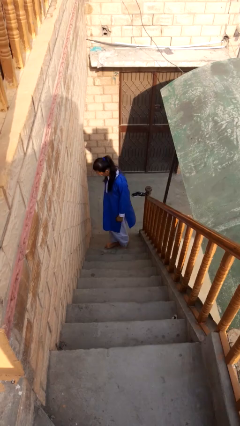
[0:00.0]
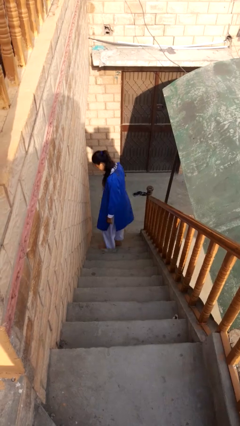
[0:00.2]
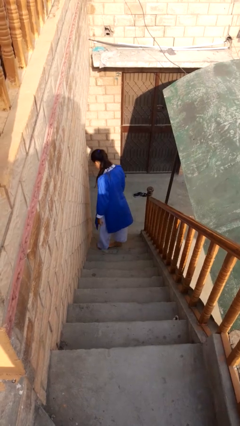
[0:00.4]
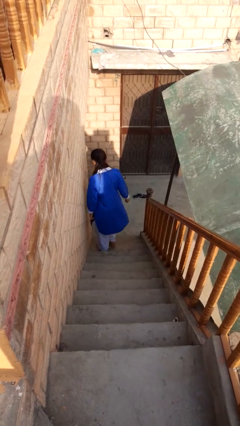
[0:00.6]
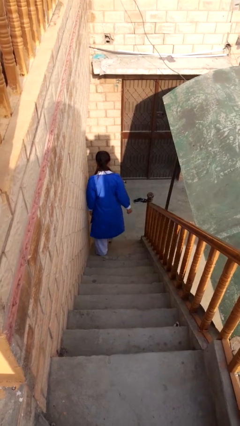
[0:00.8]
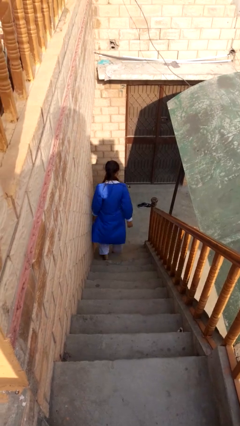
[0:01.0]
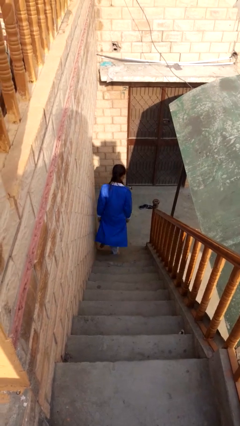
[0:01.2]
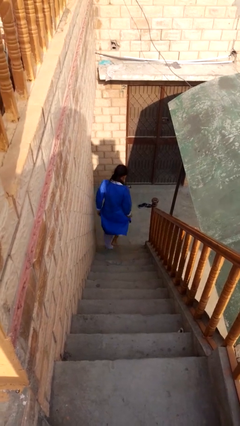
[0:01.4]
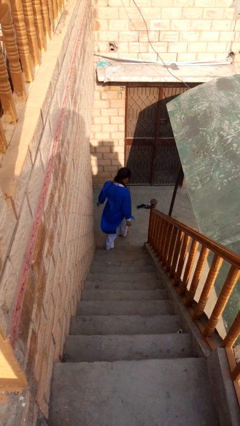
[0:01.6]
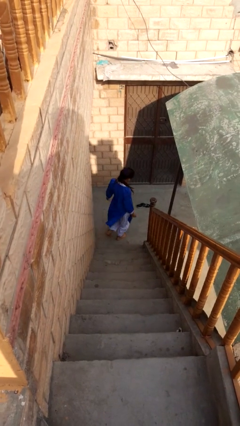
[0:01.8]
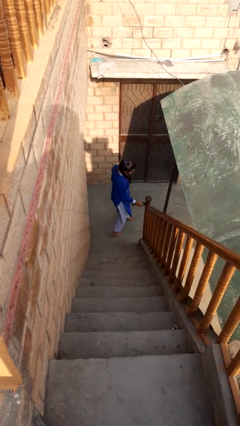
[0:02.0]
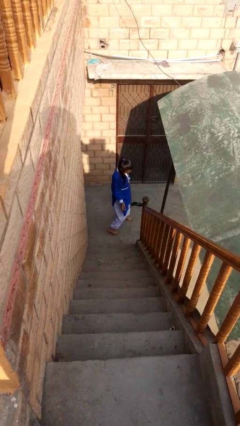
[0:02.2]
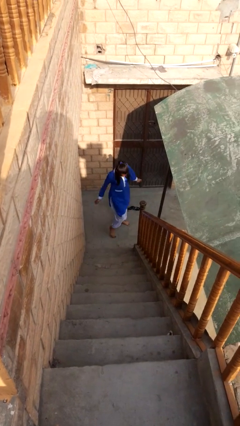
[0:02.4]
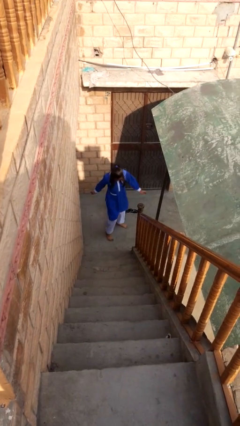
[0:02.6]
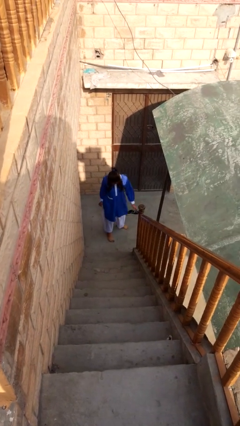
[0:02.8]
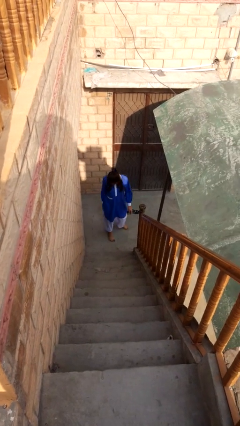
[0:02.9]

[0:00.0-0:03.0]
person climbs down stairs

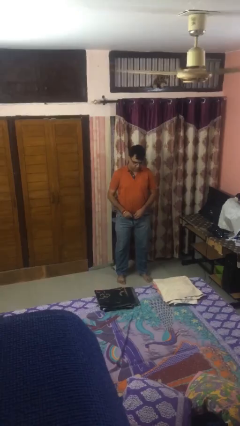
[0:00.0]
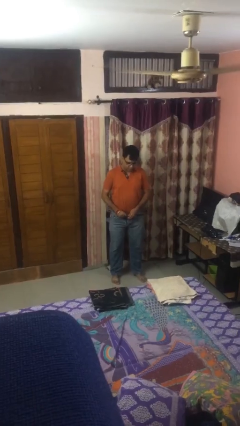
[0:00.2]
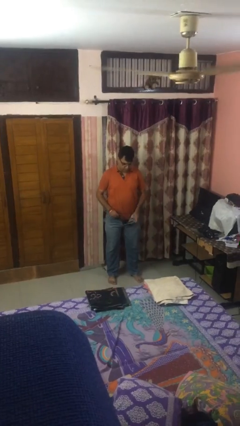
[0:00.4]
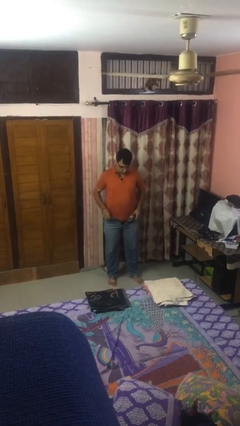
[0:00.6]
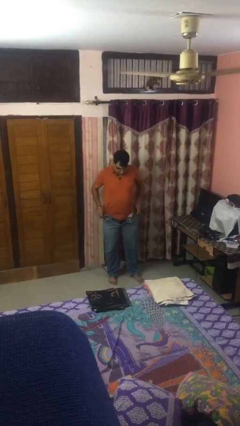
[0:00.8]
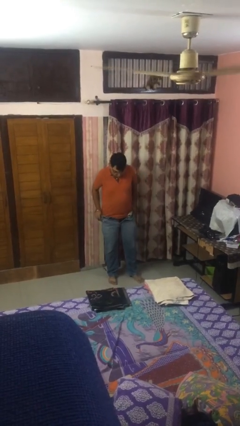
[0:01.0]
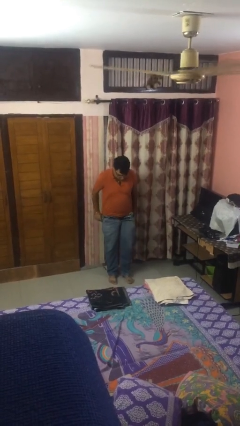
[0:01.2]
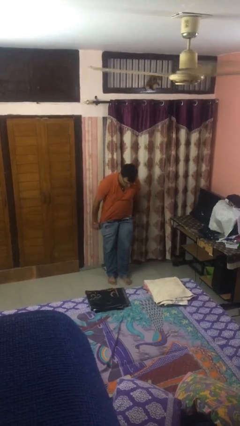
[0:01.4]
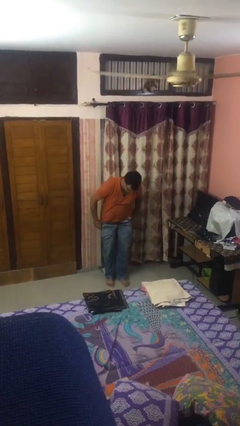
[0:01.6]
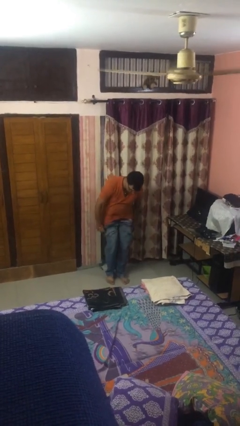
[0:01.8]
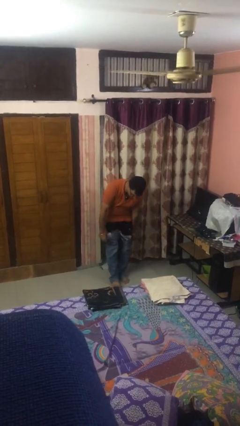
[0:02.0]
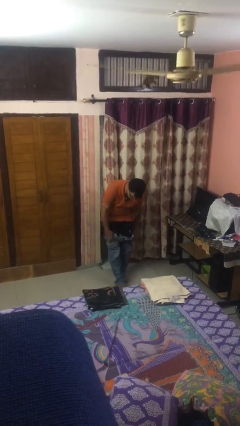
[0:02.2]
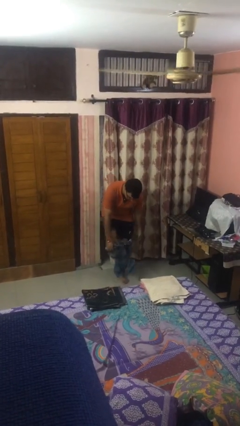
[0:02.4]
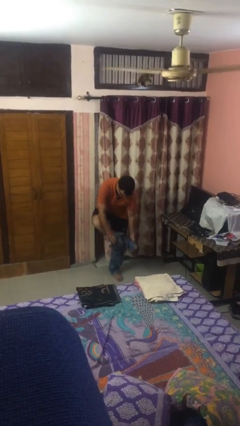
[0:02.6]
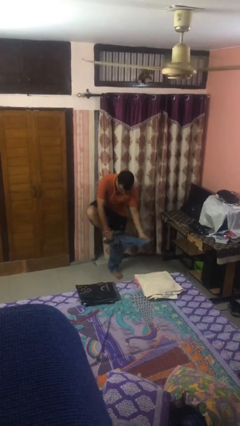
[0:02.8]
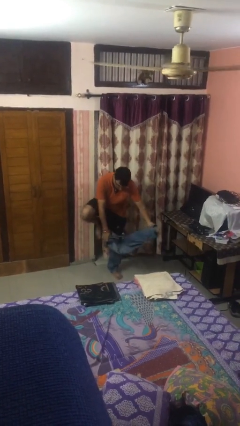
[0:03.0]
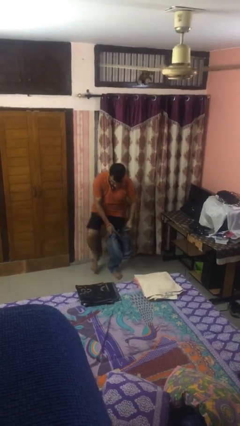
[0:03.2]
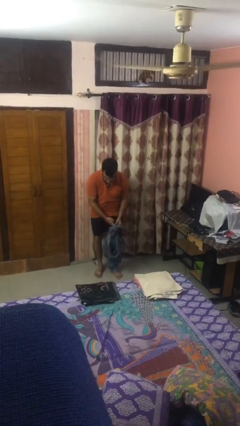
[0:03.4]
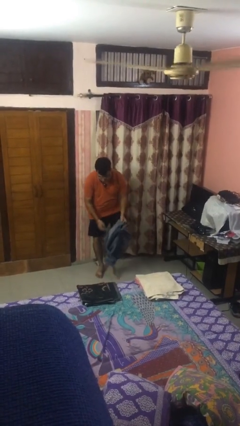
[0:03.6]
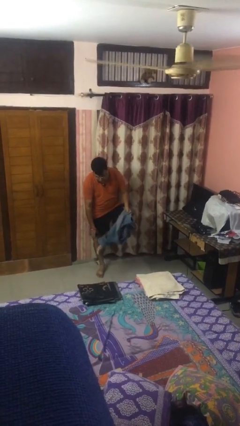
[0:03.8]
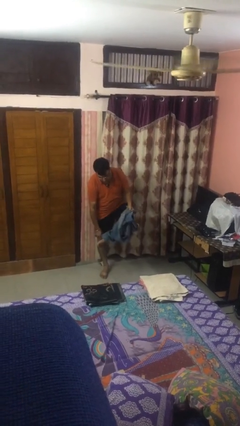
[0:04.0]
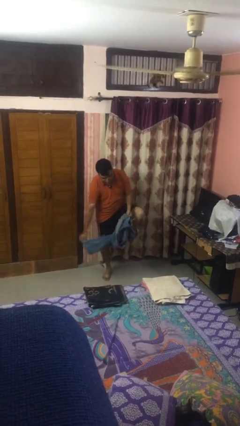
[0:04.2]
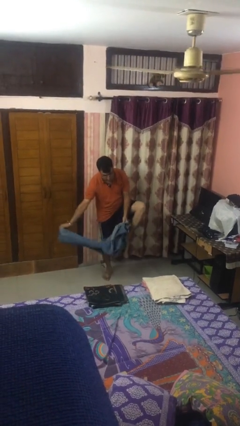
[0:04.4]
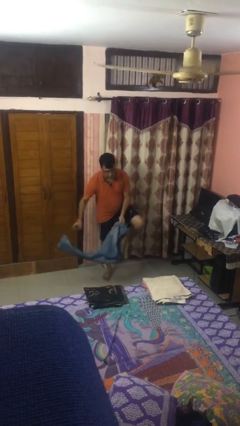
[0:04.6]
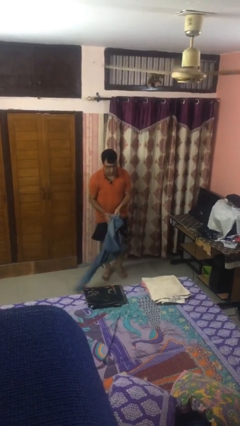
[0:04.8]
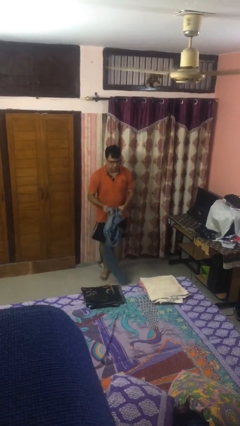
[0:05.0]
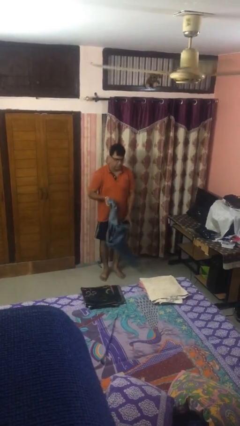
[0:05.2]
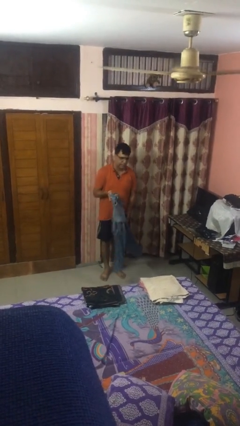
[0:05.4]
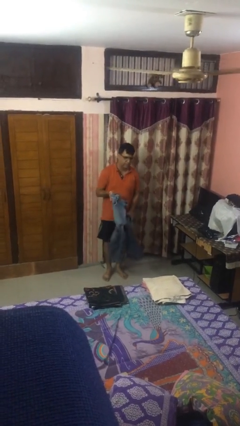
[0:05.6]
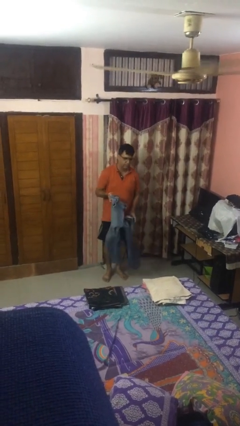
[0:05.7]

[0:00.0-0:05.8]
person takes off pants

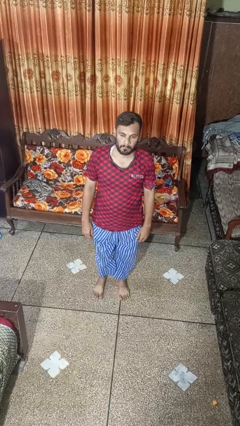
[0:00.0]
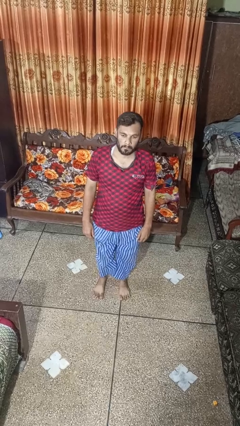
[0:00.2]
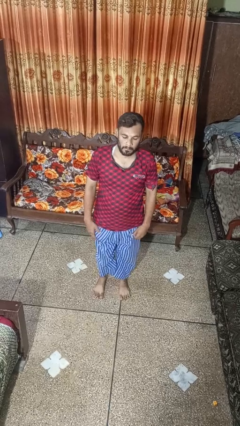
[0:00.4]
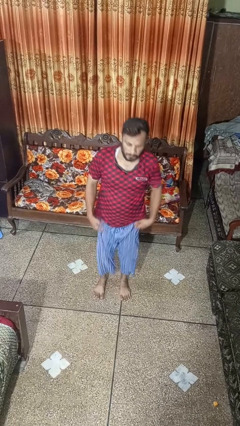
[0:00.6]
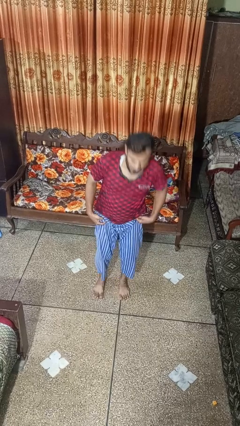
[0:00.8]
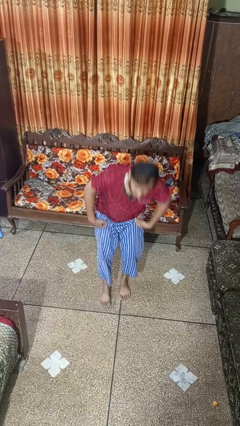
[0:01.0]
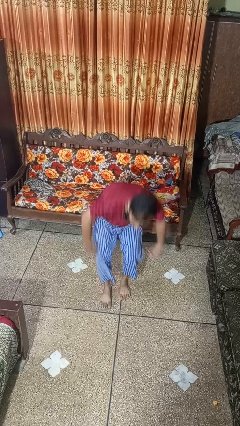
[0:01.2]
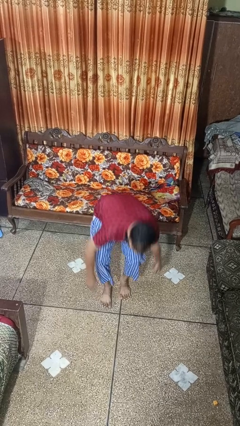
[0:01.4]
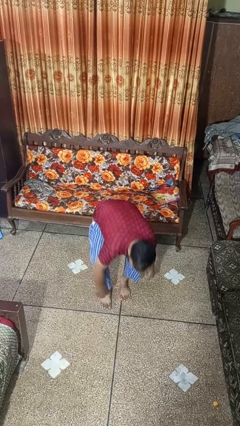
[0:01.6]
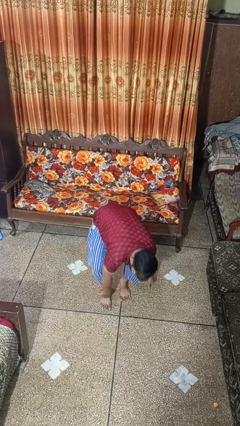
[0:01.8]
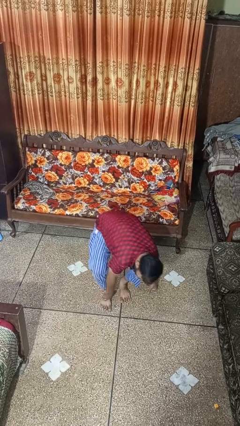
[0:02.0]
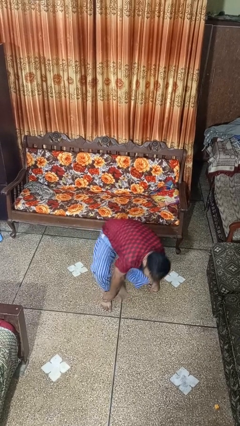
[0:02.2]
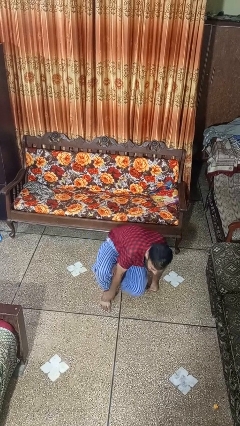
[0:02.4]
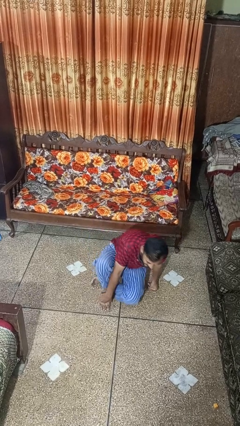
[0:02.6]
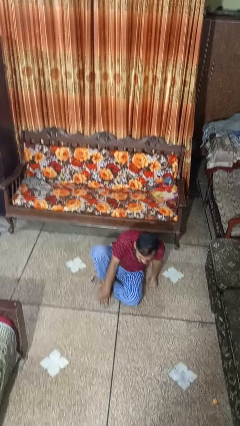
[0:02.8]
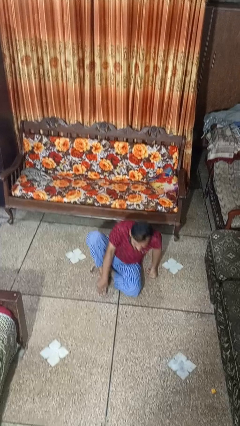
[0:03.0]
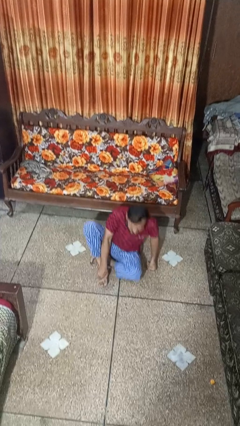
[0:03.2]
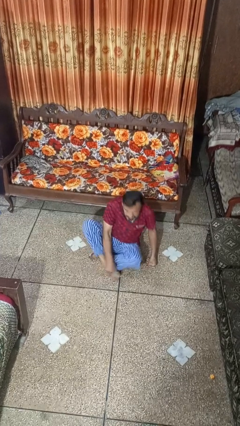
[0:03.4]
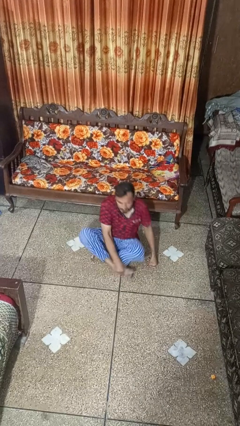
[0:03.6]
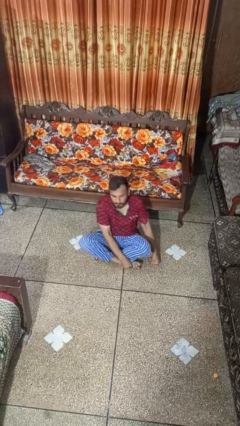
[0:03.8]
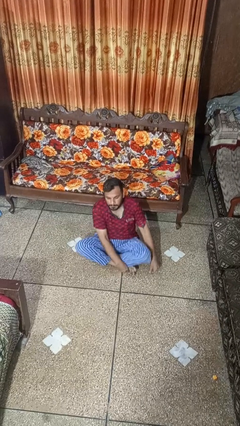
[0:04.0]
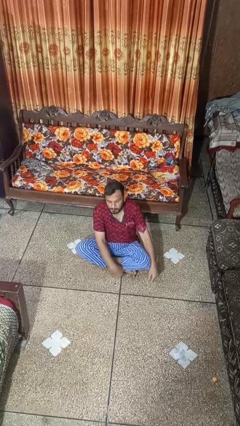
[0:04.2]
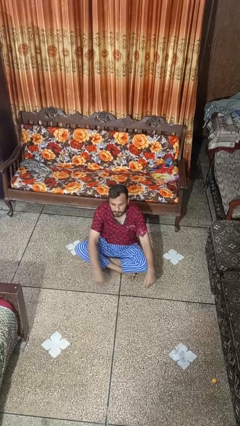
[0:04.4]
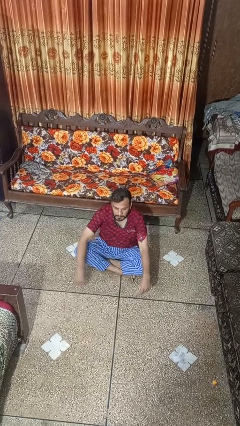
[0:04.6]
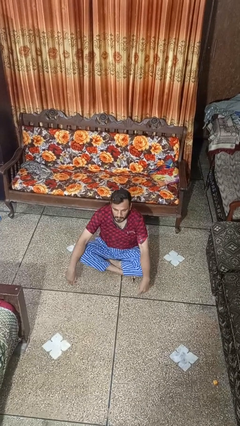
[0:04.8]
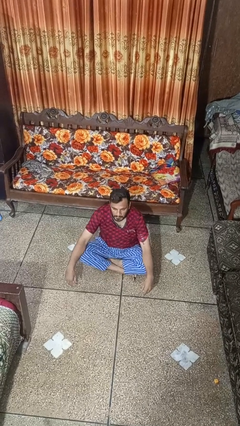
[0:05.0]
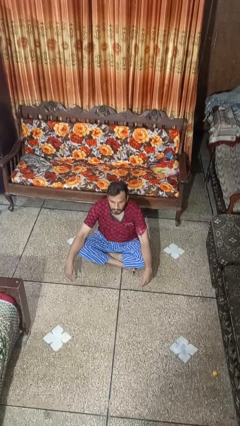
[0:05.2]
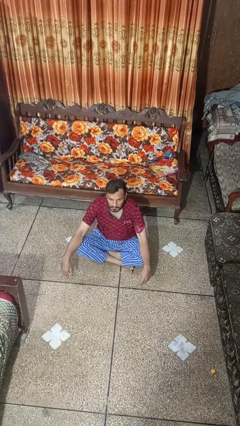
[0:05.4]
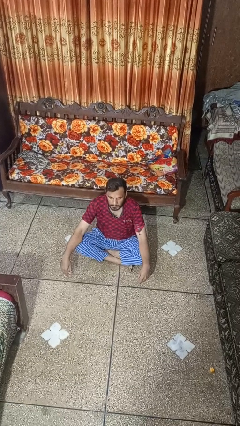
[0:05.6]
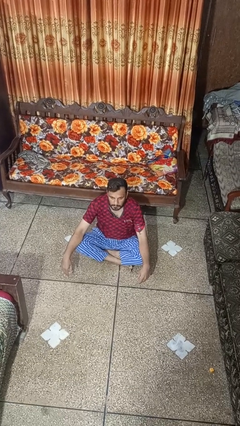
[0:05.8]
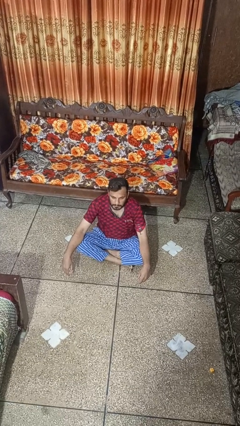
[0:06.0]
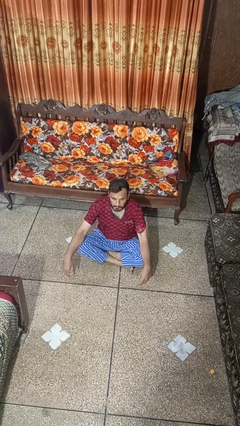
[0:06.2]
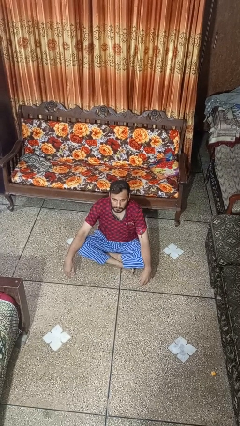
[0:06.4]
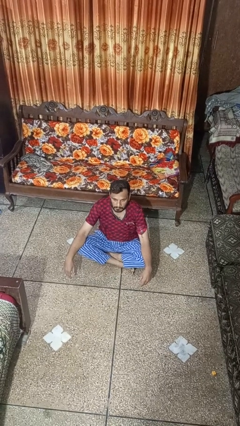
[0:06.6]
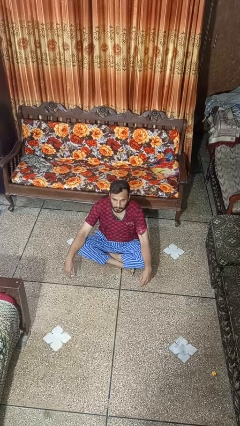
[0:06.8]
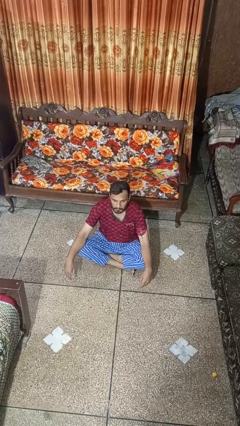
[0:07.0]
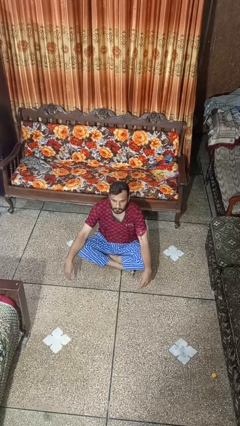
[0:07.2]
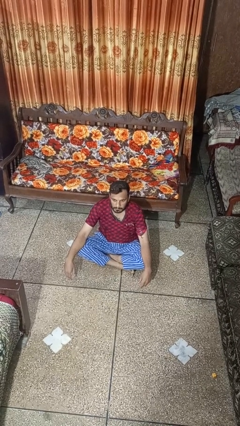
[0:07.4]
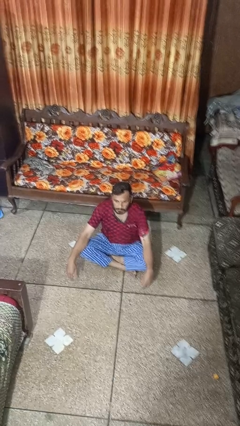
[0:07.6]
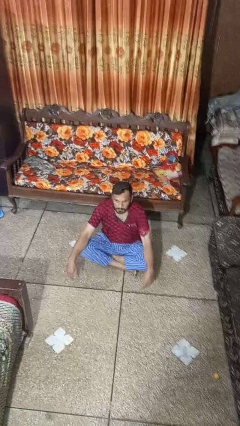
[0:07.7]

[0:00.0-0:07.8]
person sits crisscross

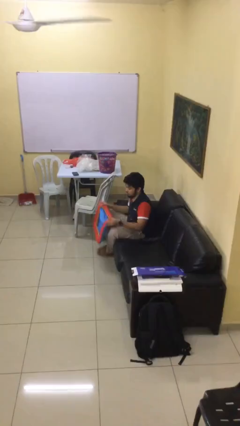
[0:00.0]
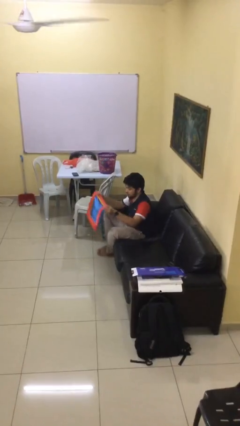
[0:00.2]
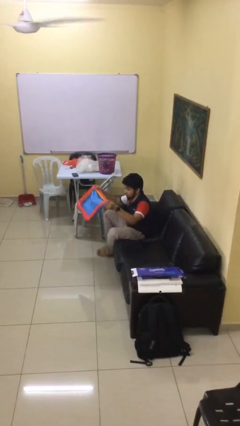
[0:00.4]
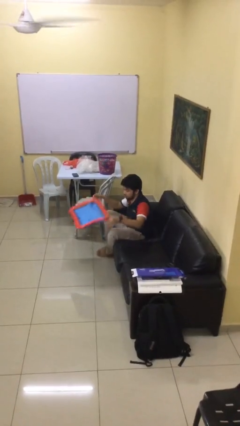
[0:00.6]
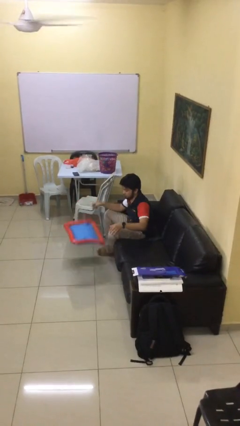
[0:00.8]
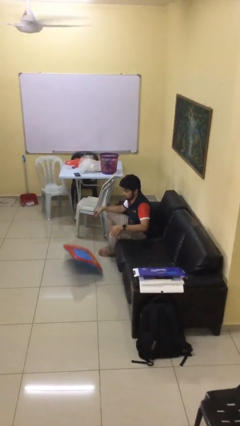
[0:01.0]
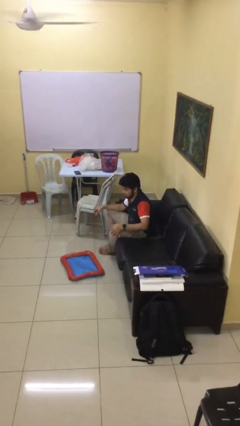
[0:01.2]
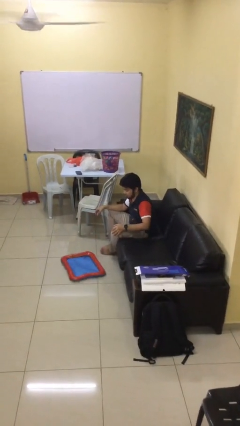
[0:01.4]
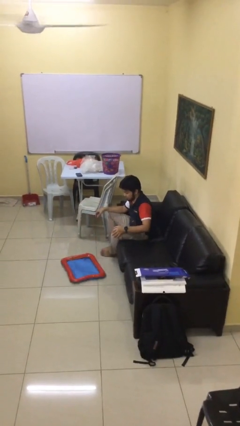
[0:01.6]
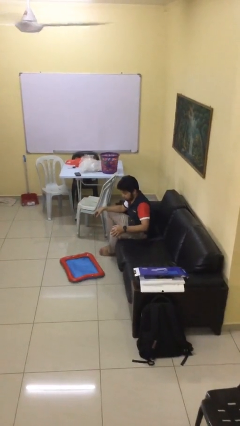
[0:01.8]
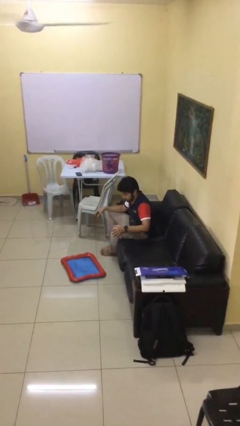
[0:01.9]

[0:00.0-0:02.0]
person drops object
